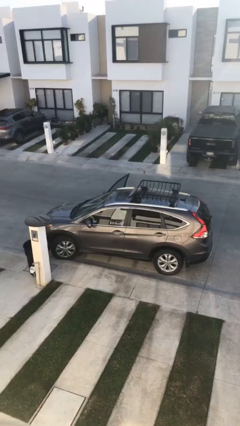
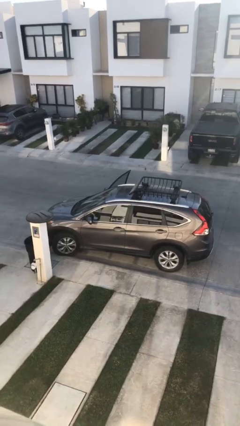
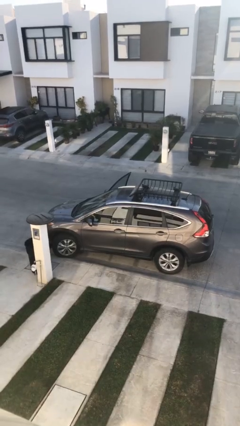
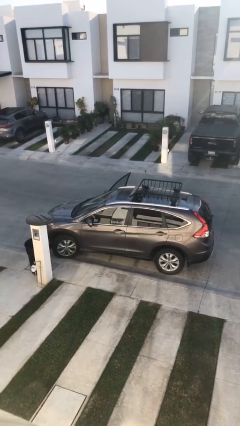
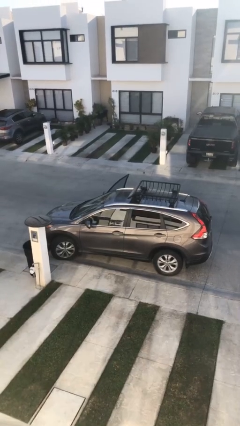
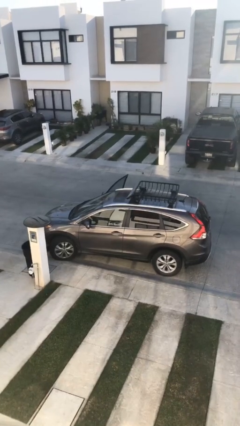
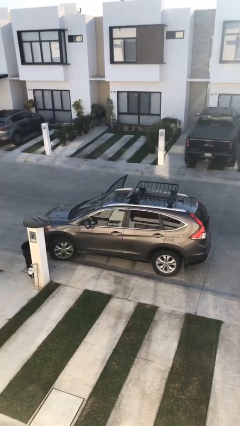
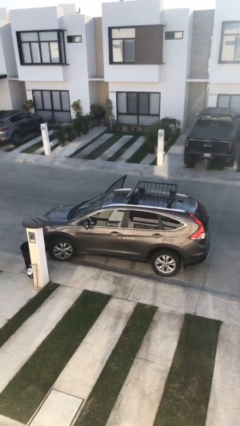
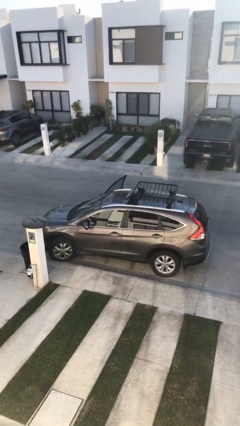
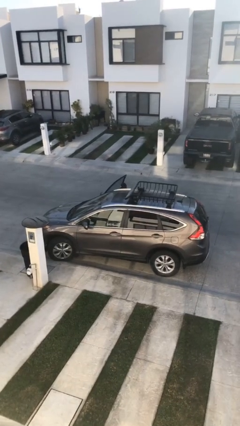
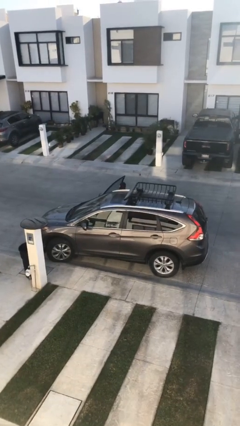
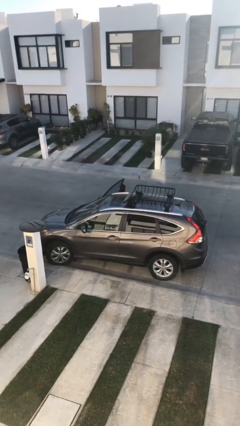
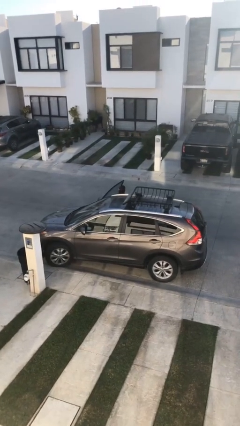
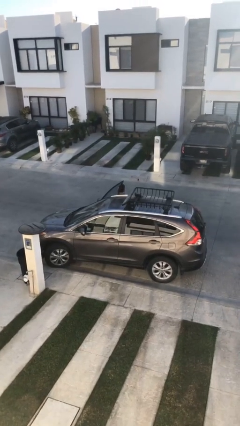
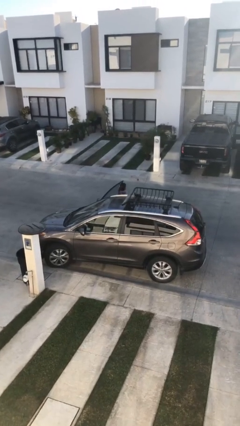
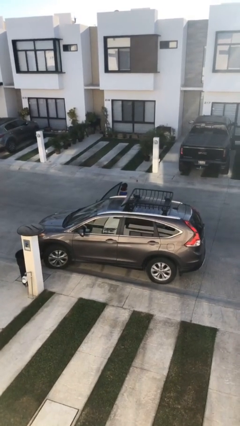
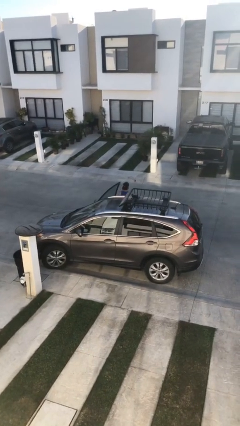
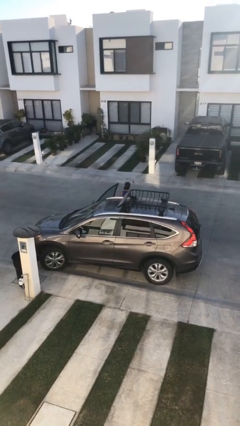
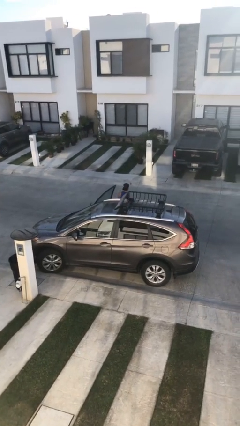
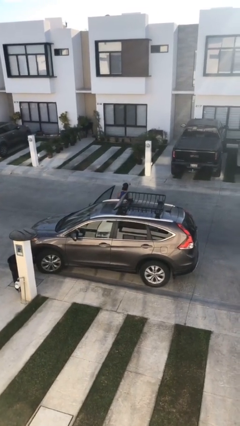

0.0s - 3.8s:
person exits car

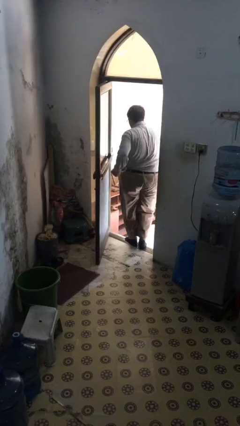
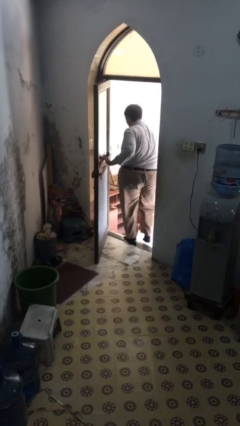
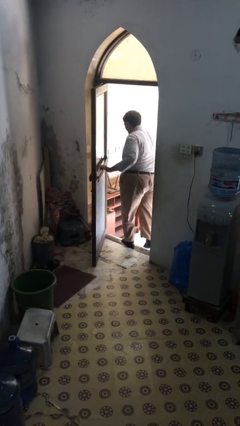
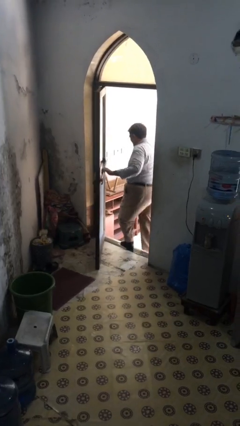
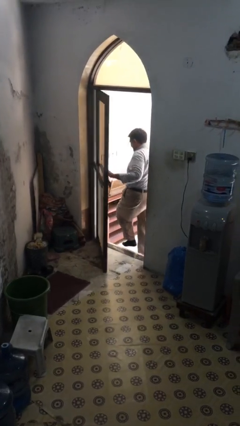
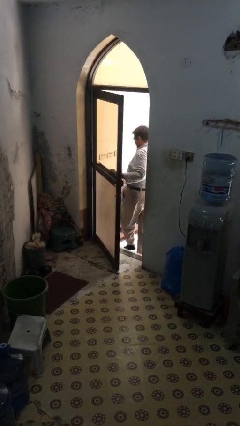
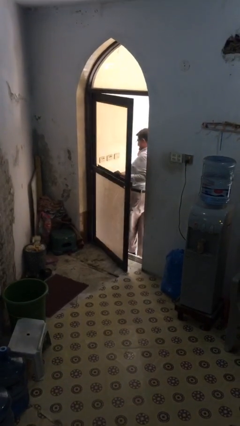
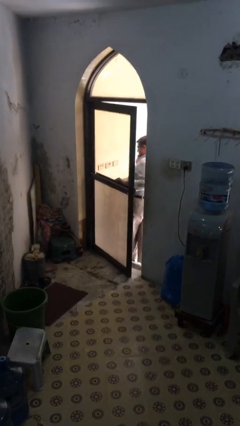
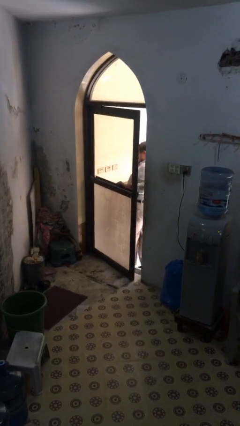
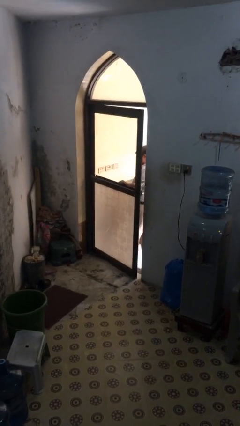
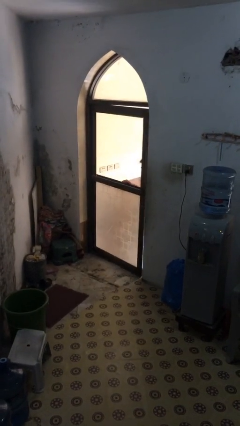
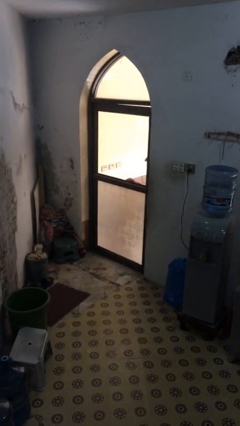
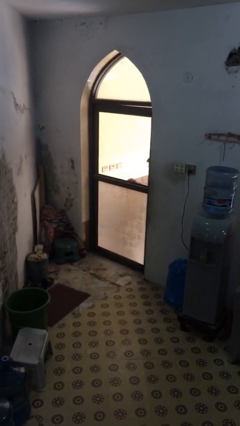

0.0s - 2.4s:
person closes facility door

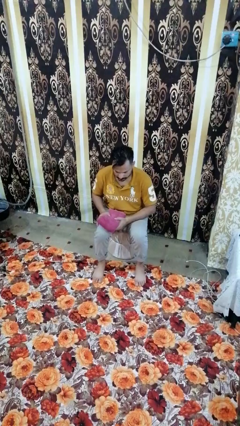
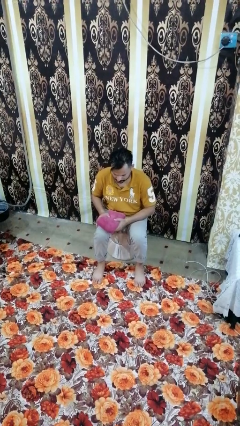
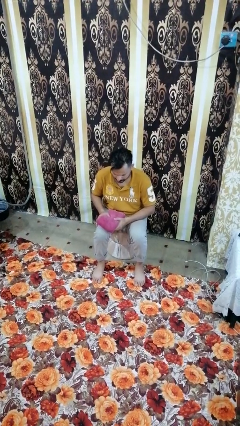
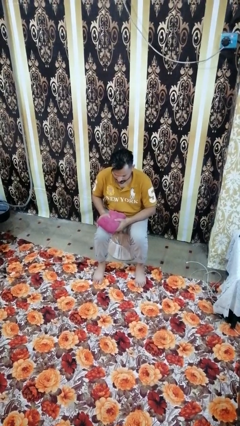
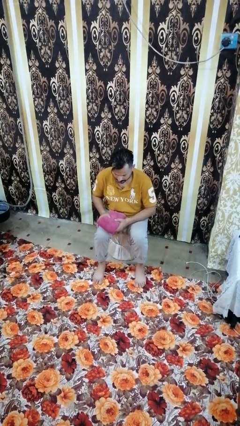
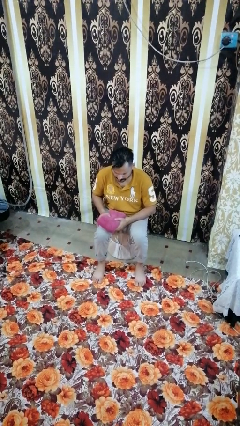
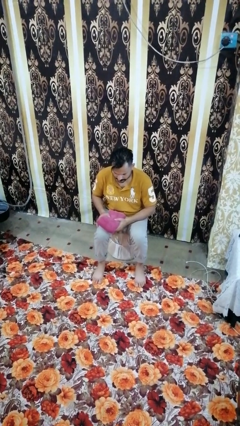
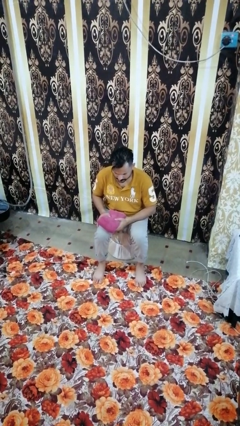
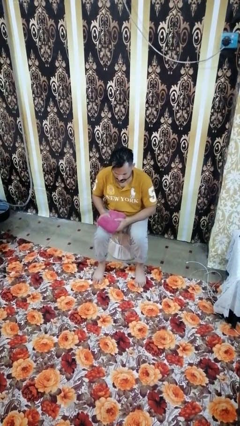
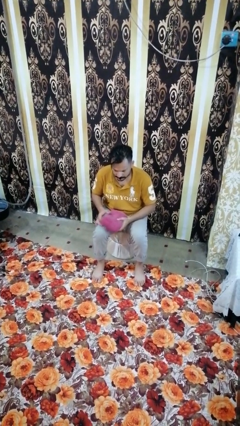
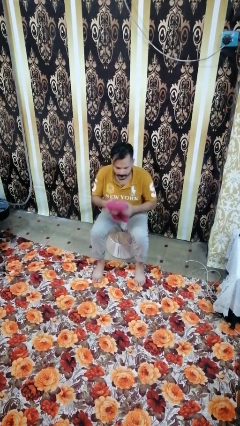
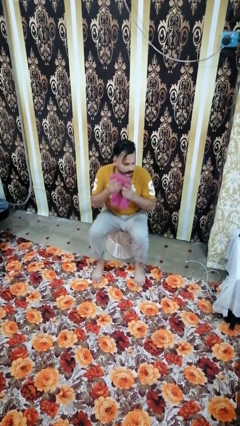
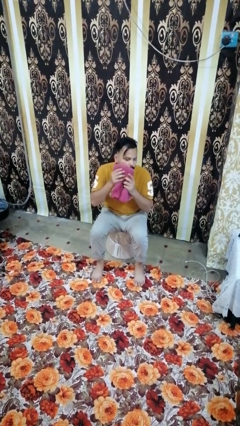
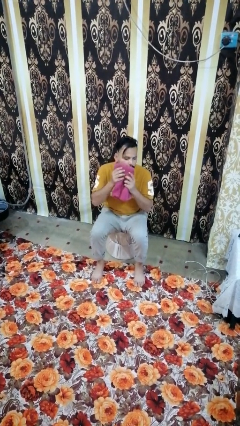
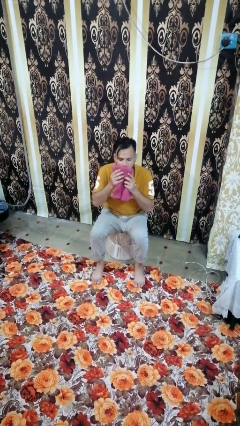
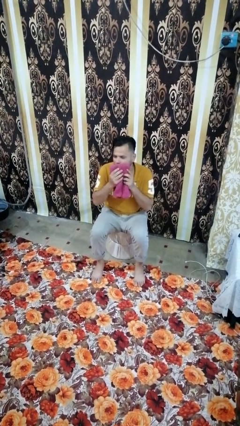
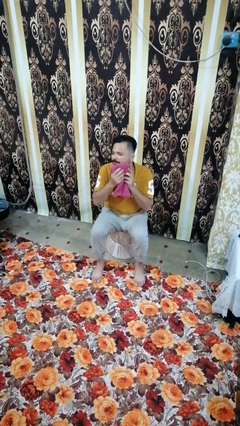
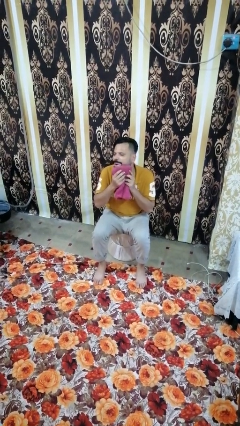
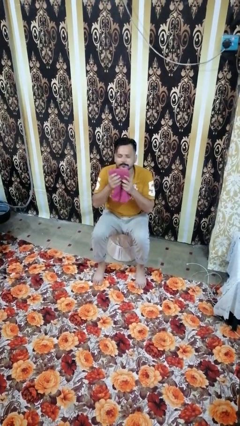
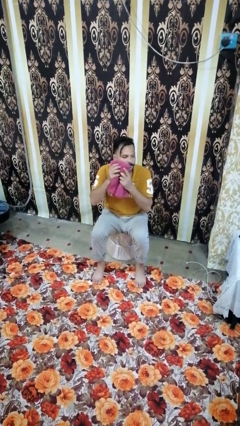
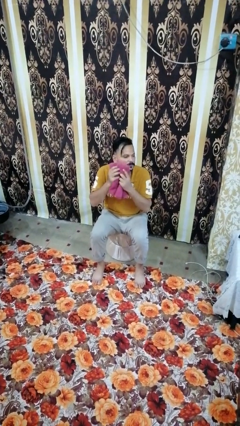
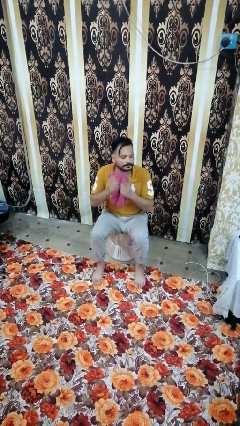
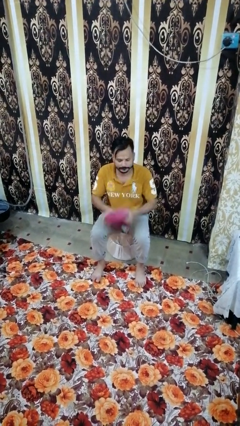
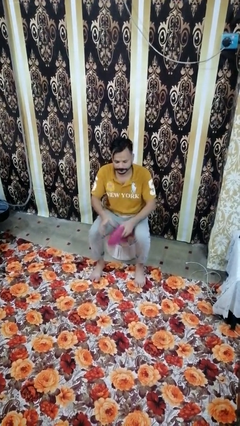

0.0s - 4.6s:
person wipes mouth with napkin

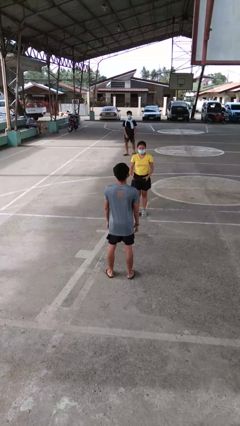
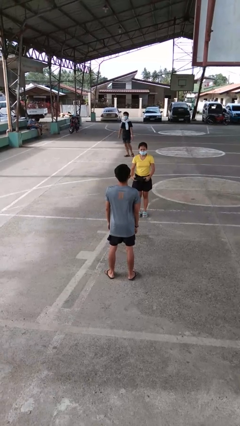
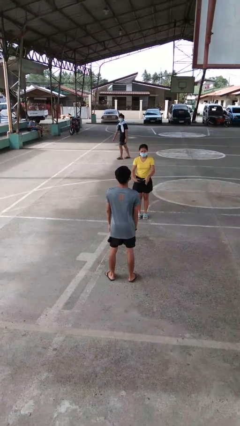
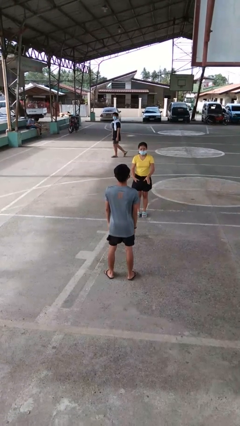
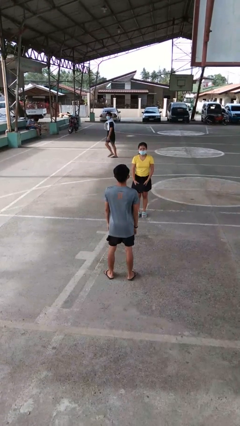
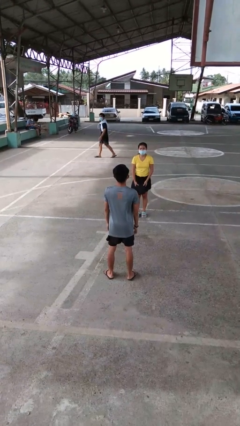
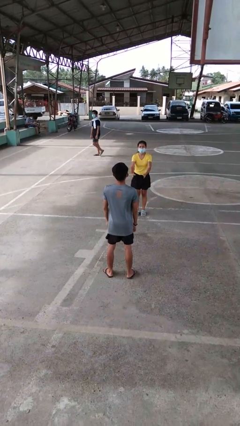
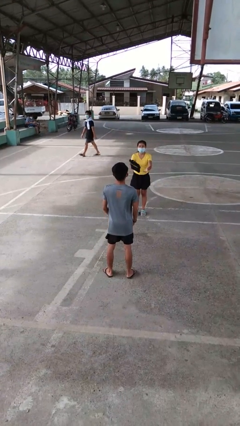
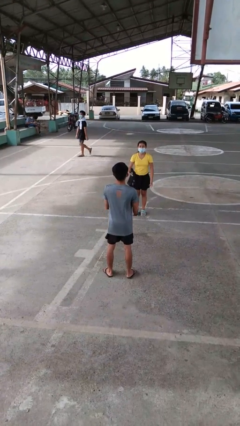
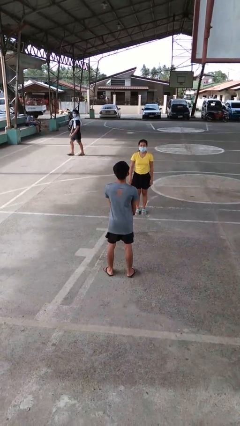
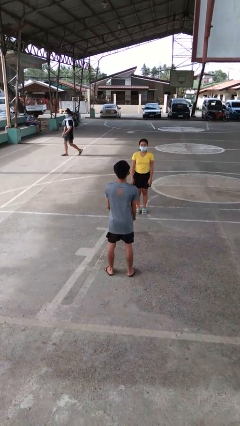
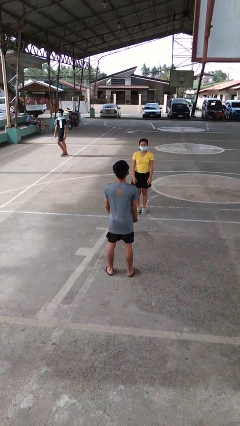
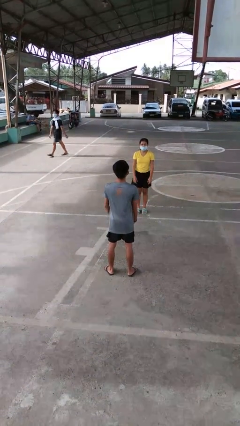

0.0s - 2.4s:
person catches object from person

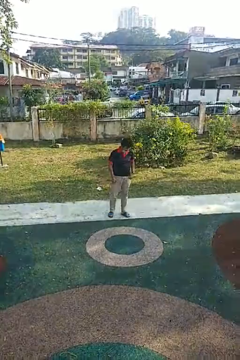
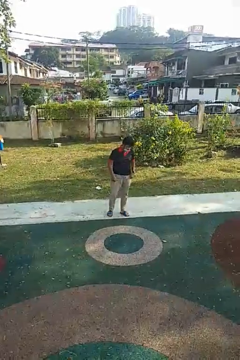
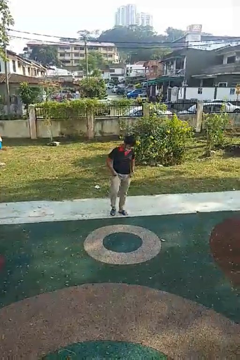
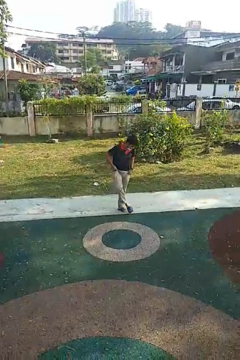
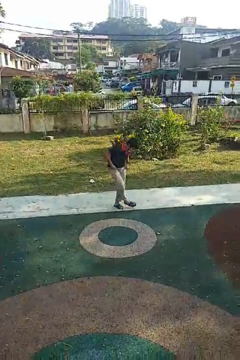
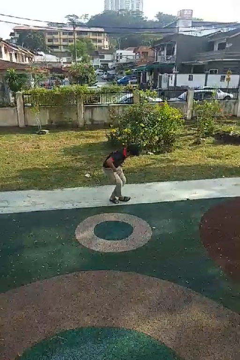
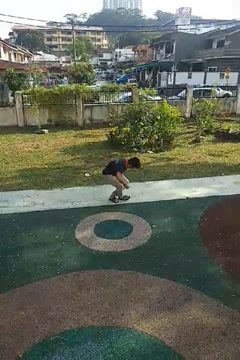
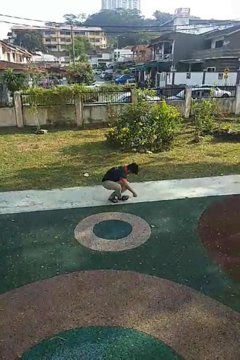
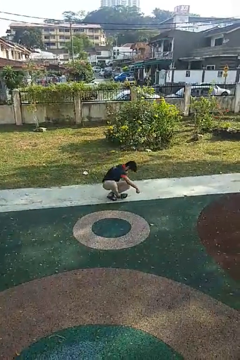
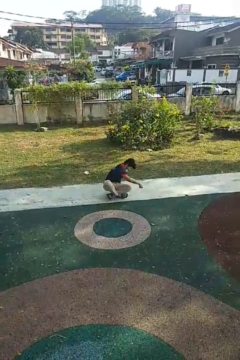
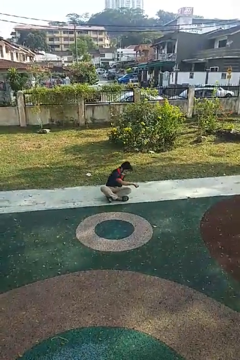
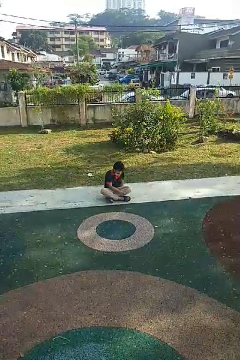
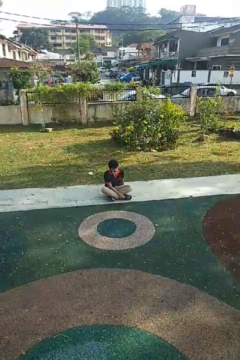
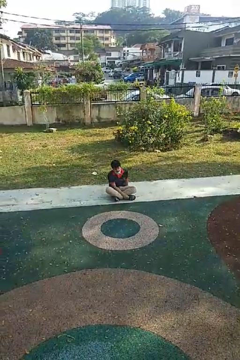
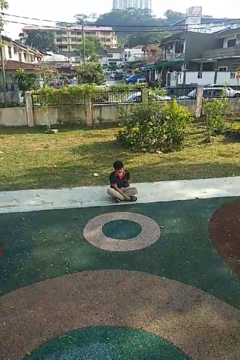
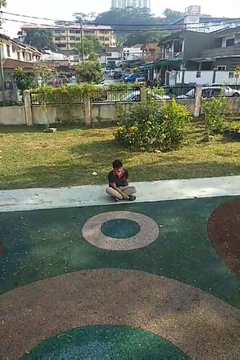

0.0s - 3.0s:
person sits crisscross

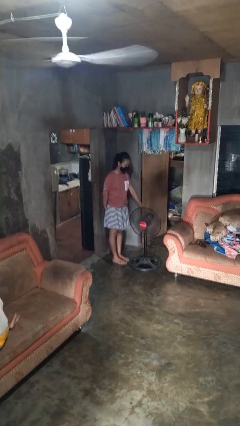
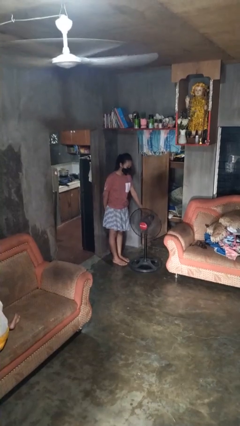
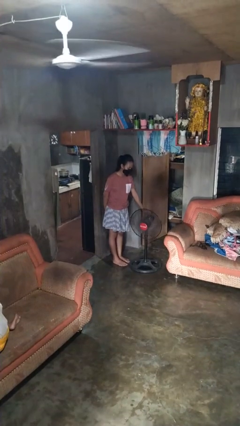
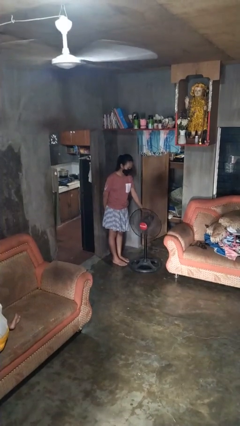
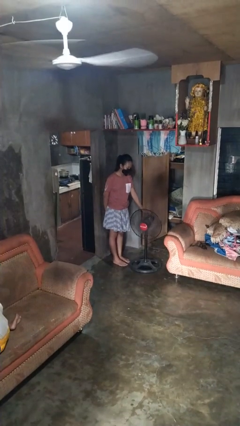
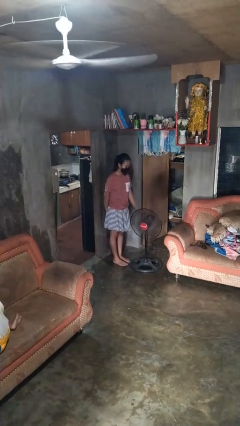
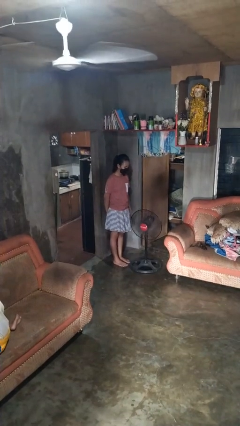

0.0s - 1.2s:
person turns off fan

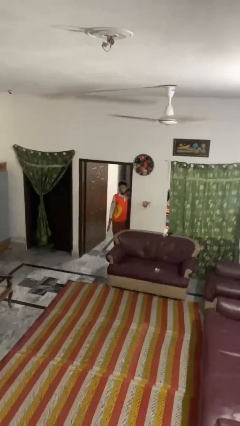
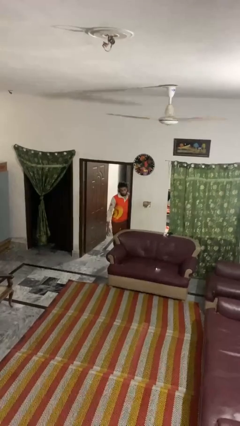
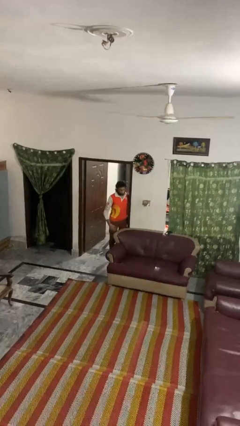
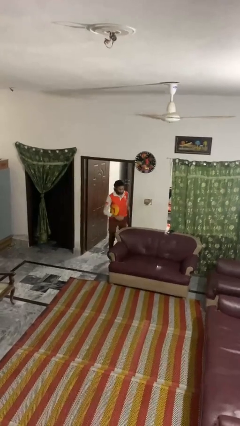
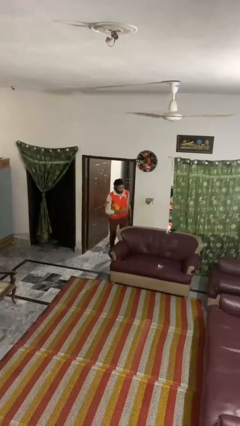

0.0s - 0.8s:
person bumps into wall
